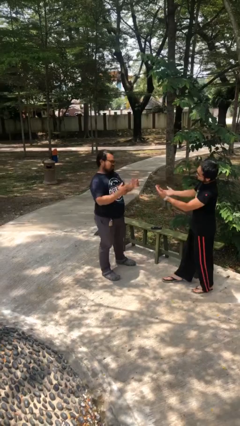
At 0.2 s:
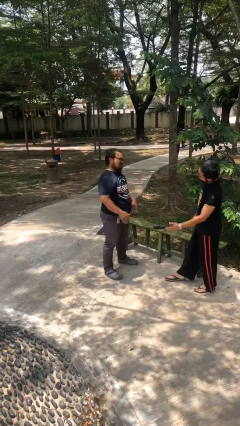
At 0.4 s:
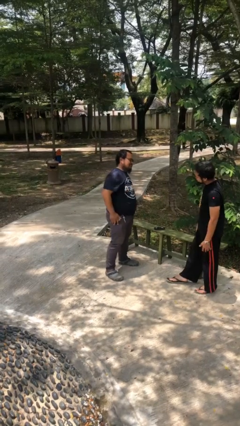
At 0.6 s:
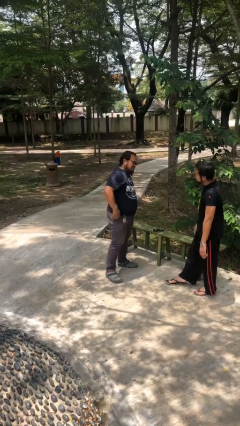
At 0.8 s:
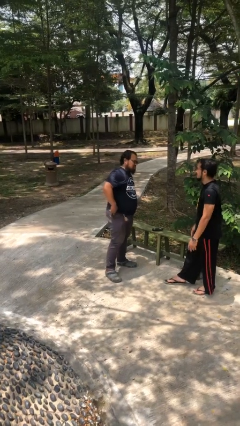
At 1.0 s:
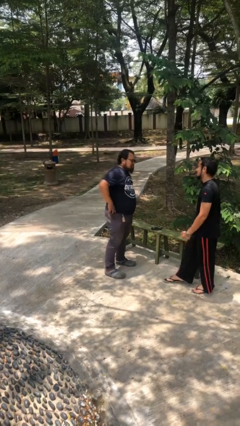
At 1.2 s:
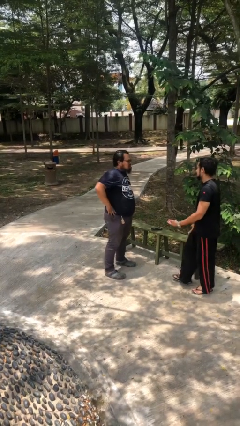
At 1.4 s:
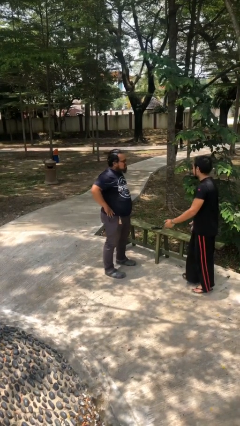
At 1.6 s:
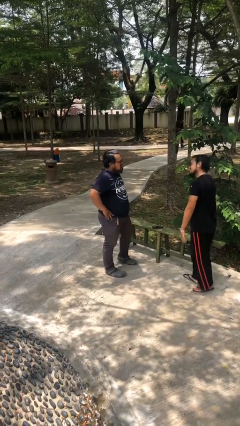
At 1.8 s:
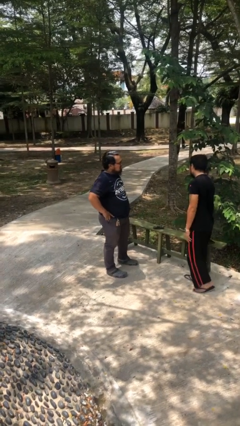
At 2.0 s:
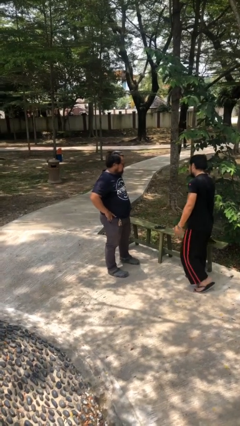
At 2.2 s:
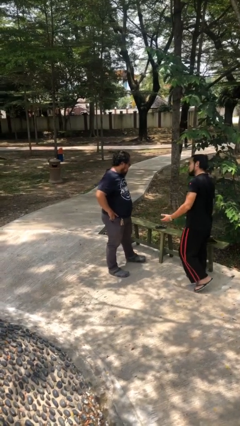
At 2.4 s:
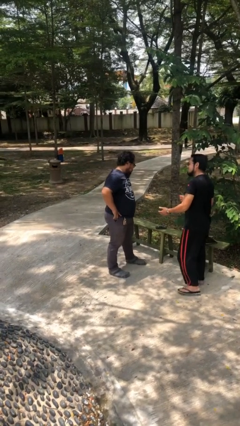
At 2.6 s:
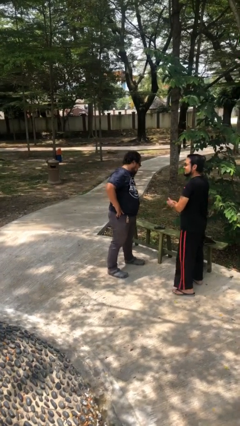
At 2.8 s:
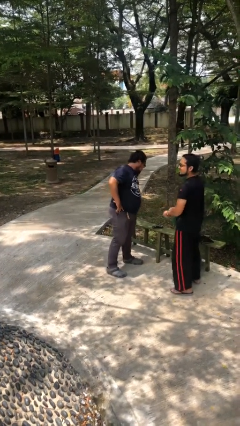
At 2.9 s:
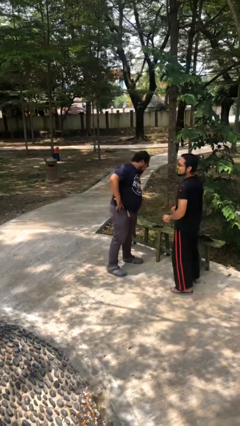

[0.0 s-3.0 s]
person talks to person

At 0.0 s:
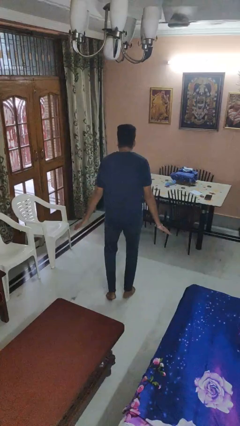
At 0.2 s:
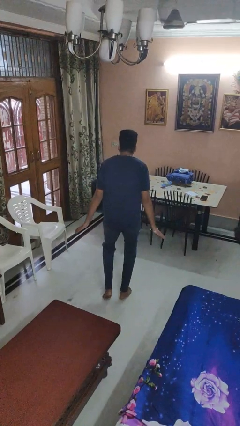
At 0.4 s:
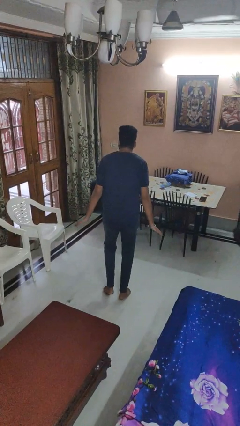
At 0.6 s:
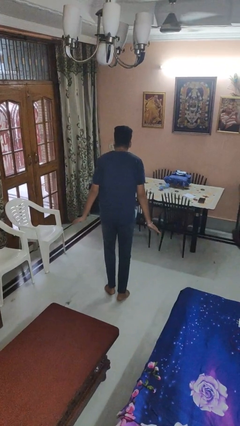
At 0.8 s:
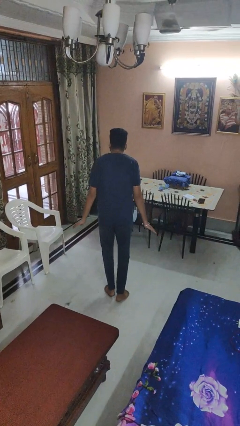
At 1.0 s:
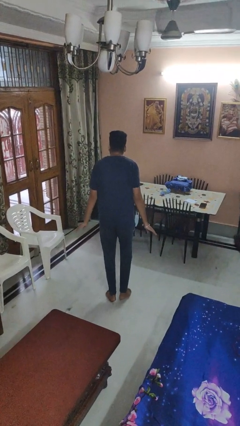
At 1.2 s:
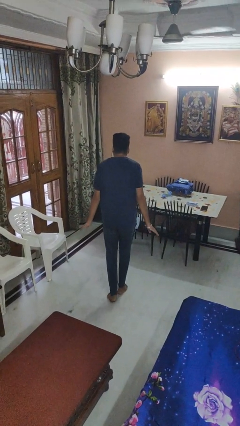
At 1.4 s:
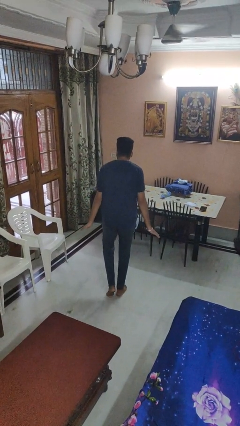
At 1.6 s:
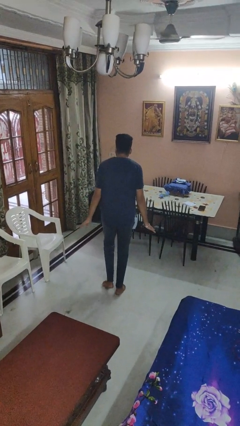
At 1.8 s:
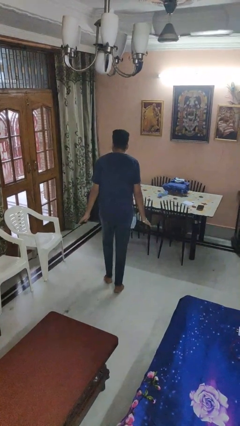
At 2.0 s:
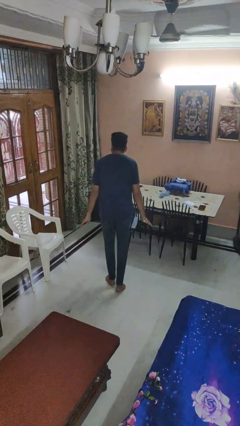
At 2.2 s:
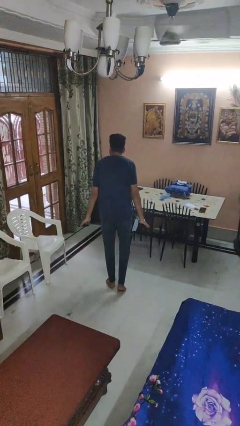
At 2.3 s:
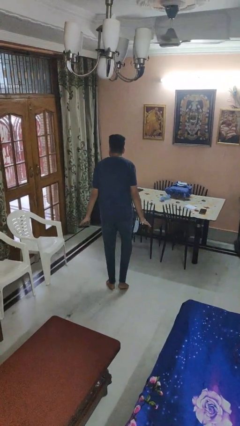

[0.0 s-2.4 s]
person walks tiptoe

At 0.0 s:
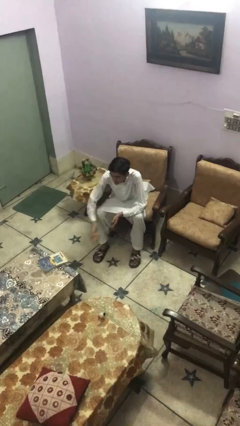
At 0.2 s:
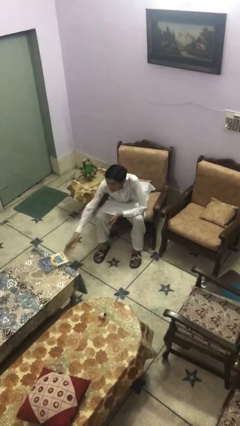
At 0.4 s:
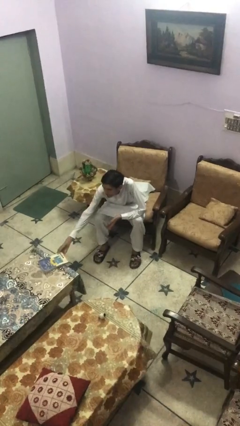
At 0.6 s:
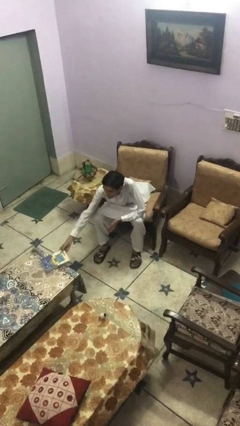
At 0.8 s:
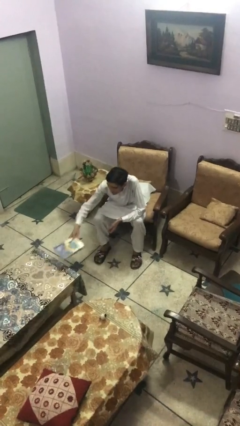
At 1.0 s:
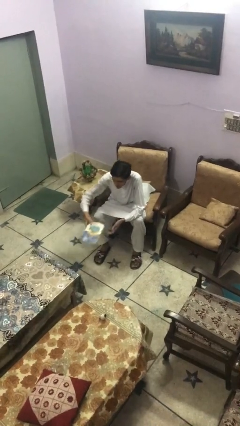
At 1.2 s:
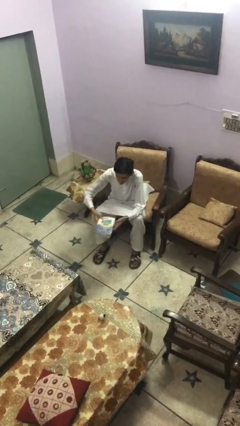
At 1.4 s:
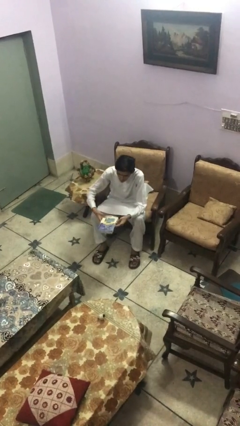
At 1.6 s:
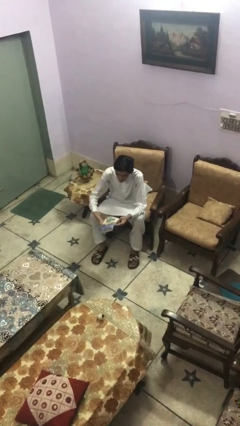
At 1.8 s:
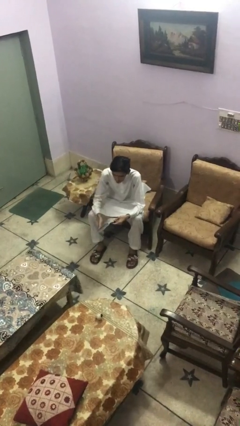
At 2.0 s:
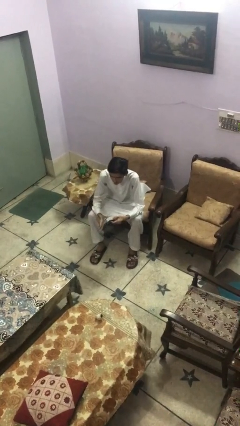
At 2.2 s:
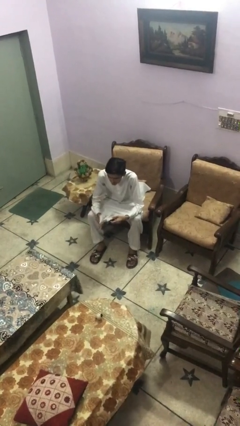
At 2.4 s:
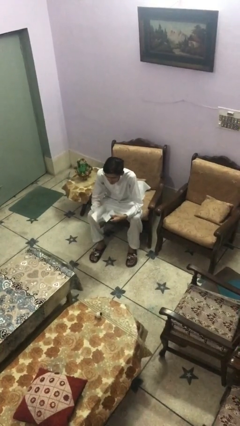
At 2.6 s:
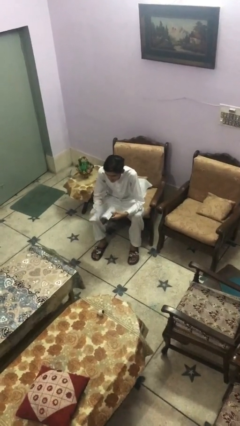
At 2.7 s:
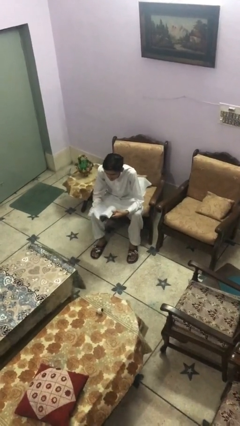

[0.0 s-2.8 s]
person picks up object from table

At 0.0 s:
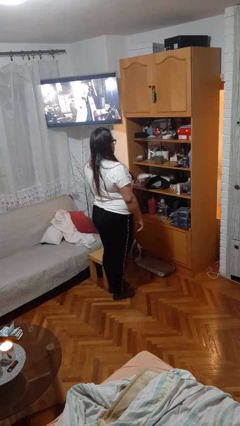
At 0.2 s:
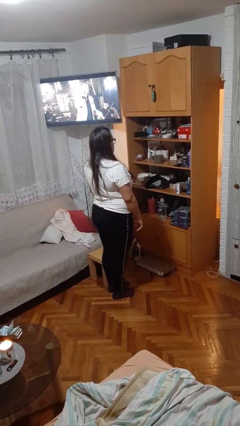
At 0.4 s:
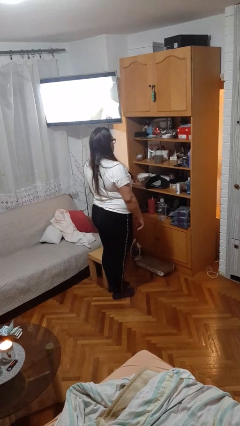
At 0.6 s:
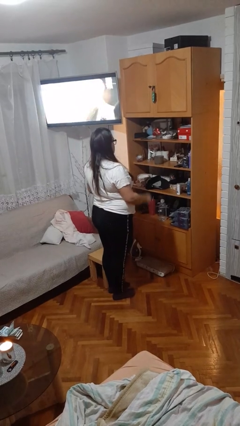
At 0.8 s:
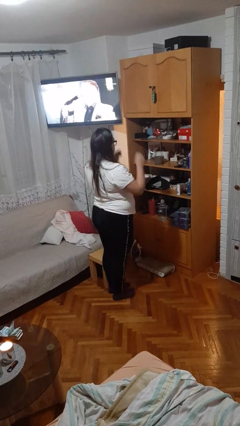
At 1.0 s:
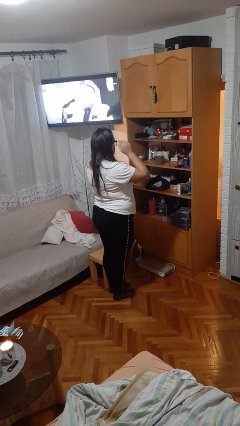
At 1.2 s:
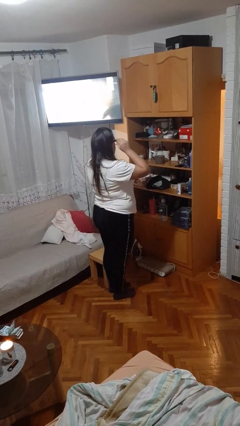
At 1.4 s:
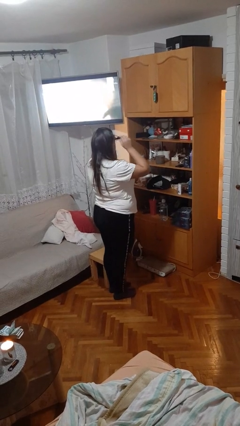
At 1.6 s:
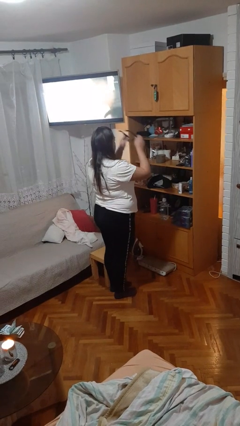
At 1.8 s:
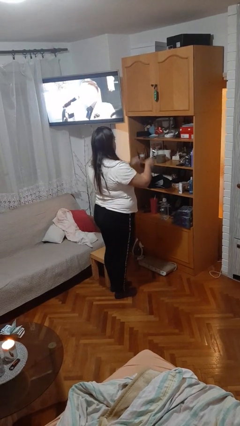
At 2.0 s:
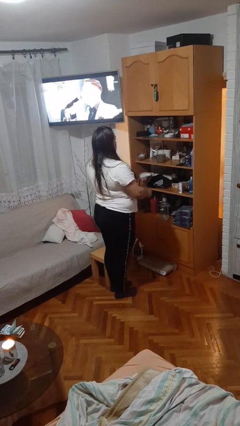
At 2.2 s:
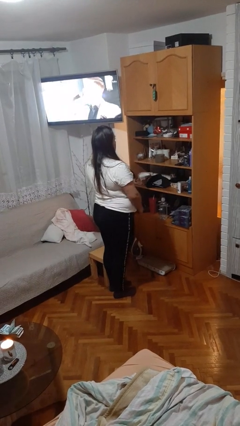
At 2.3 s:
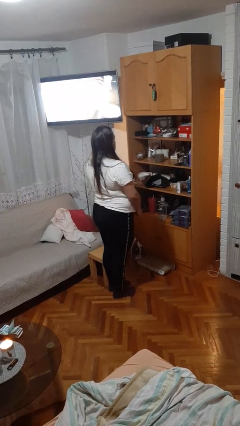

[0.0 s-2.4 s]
person takes off glasses

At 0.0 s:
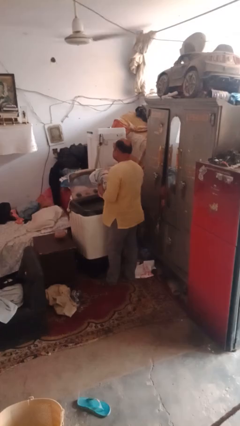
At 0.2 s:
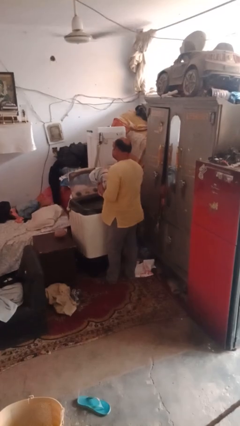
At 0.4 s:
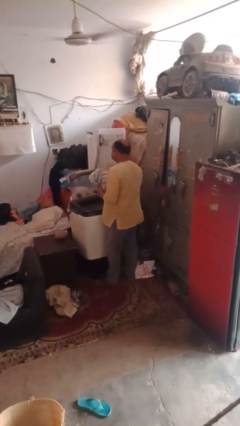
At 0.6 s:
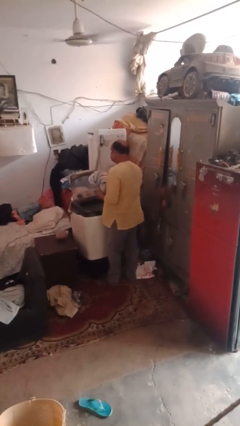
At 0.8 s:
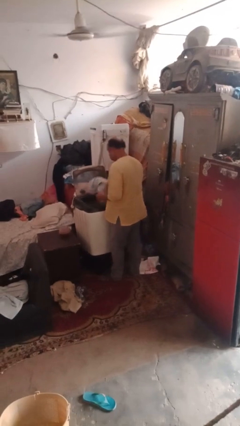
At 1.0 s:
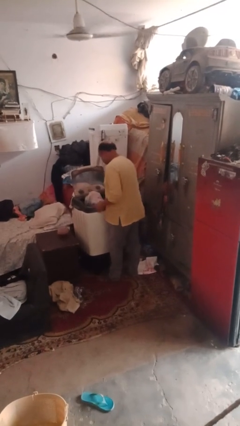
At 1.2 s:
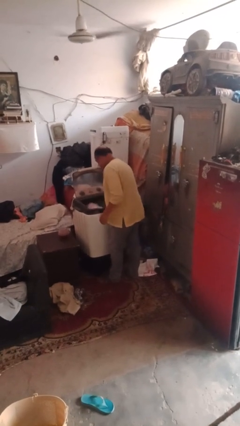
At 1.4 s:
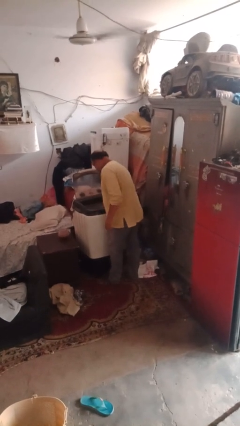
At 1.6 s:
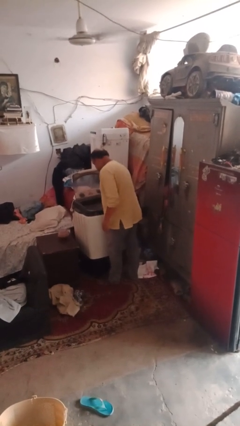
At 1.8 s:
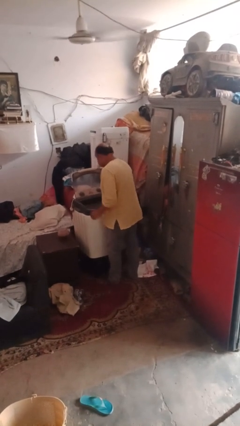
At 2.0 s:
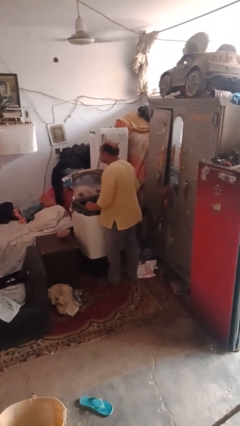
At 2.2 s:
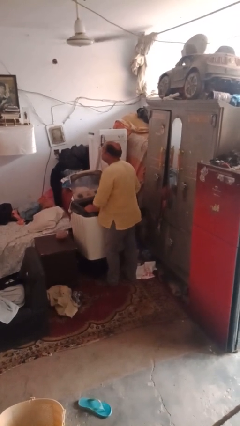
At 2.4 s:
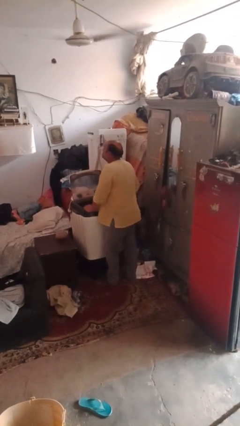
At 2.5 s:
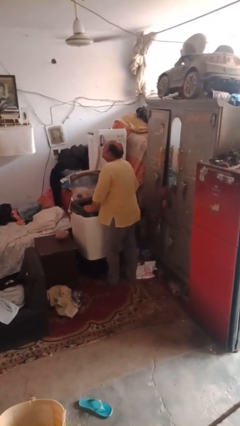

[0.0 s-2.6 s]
person loads clotheswasher

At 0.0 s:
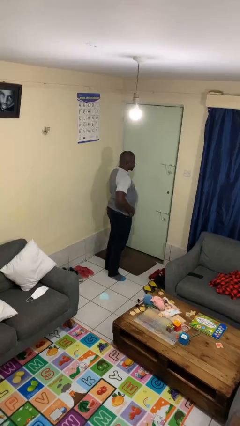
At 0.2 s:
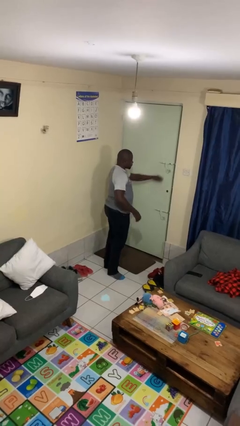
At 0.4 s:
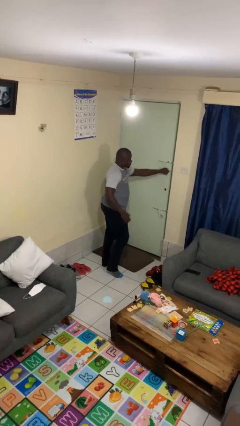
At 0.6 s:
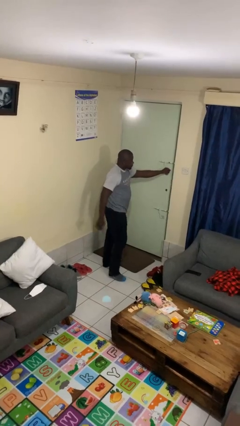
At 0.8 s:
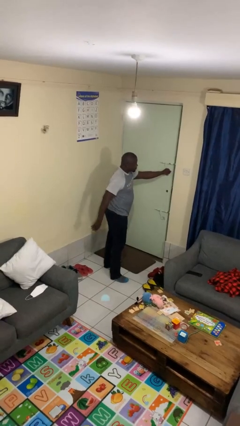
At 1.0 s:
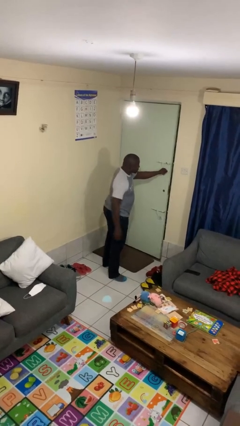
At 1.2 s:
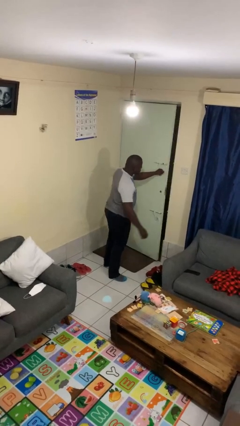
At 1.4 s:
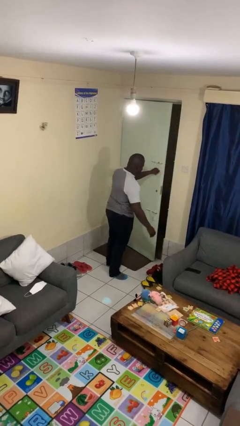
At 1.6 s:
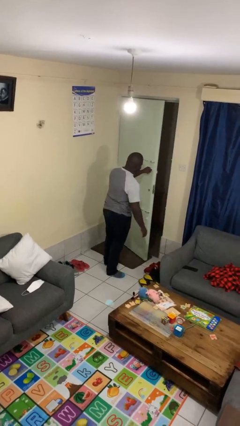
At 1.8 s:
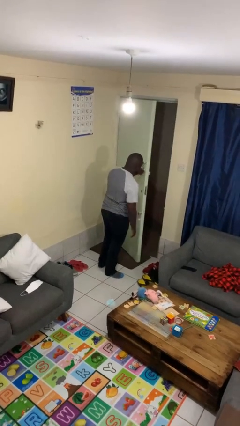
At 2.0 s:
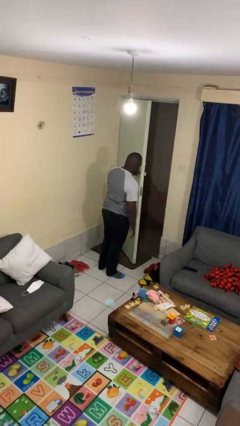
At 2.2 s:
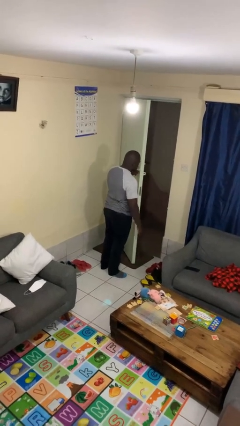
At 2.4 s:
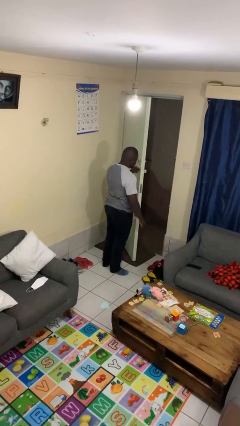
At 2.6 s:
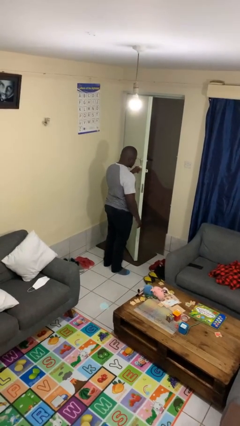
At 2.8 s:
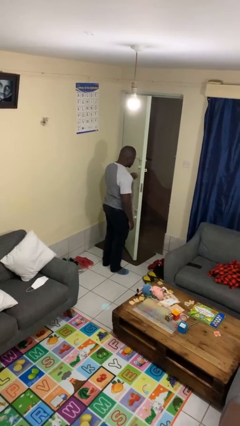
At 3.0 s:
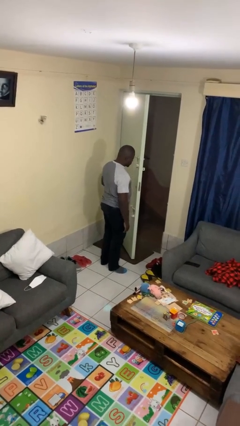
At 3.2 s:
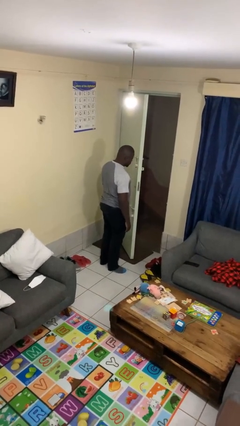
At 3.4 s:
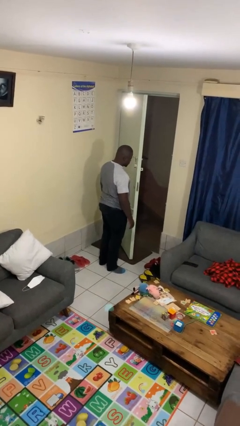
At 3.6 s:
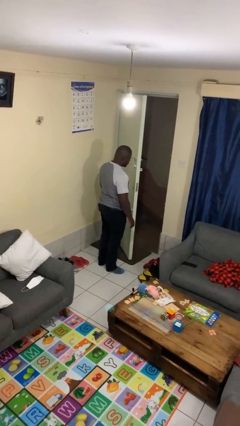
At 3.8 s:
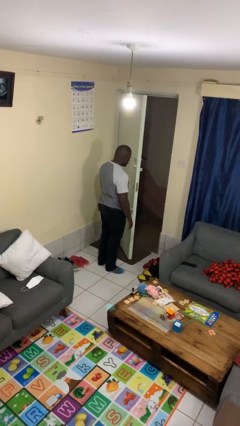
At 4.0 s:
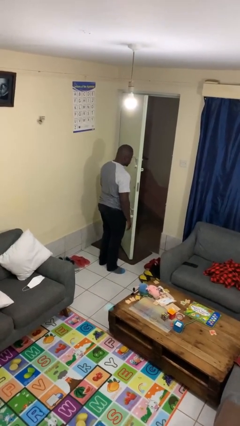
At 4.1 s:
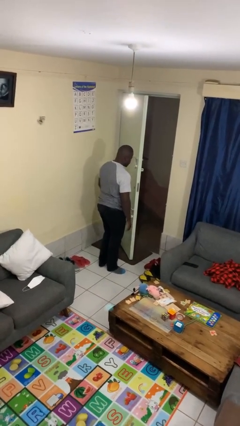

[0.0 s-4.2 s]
person opens facility door
